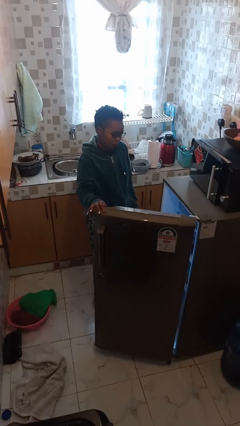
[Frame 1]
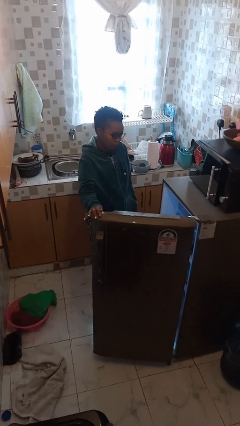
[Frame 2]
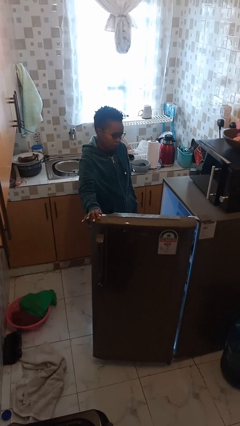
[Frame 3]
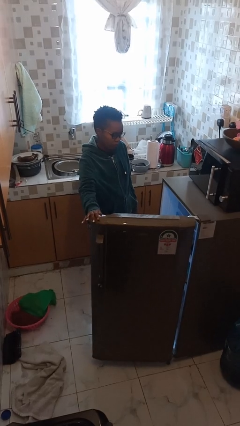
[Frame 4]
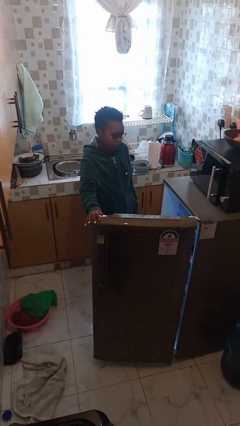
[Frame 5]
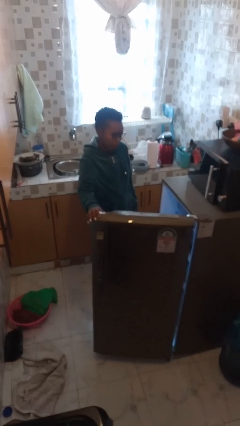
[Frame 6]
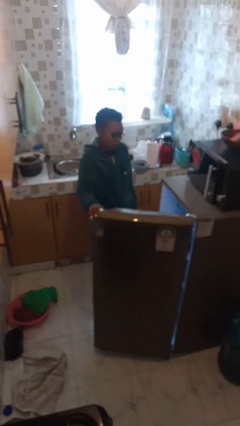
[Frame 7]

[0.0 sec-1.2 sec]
person opens refrigerator

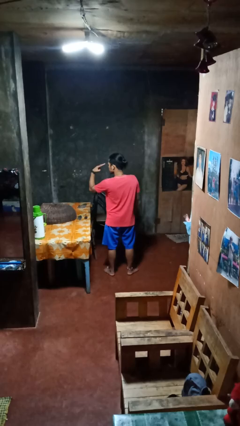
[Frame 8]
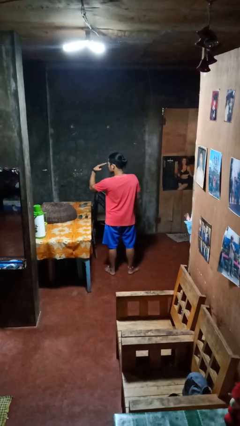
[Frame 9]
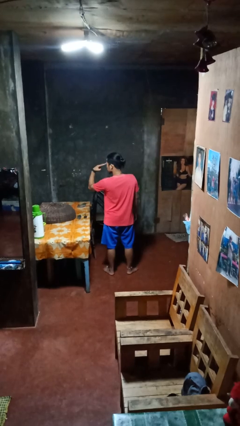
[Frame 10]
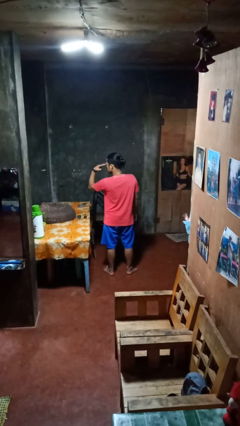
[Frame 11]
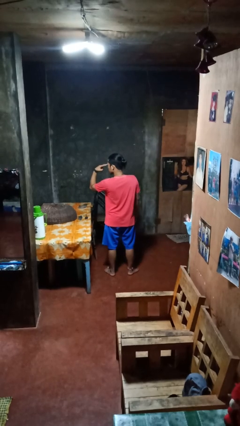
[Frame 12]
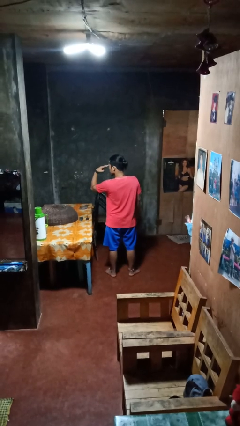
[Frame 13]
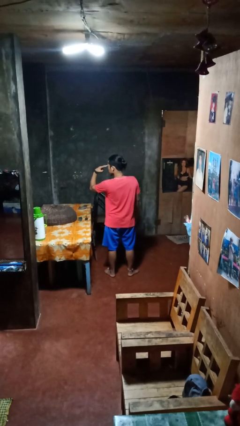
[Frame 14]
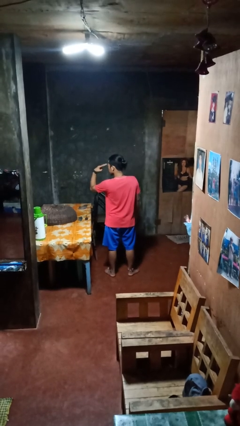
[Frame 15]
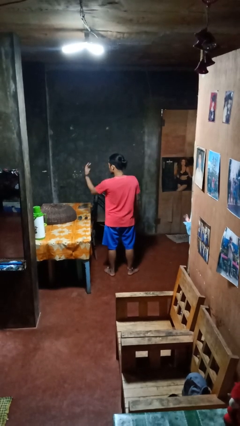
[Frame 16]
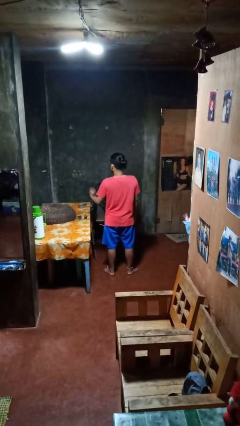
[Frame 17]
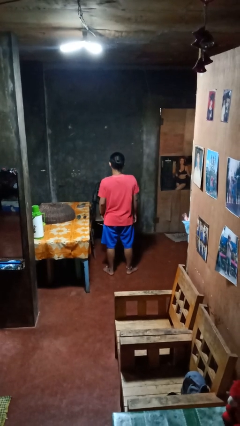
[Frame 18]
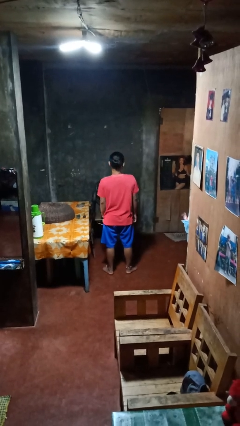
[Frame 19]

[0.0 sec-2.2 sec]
person gestures watch closely

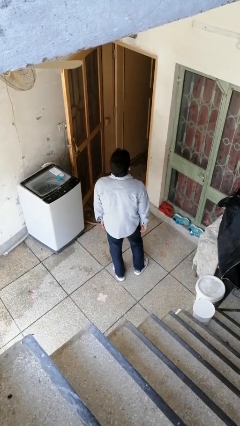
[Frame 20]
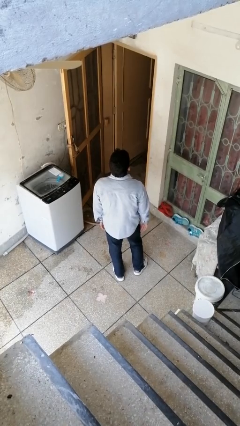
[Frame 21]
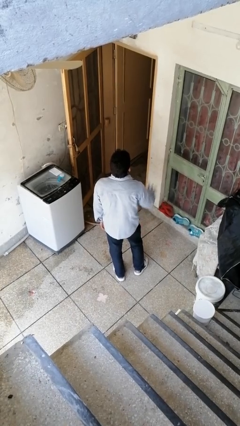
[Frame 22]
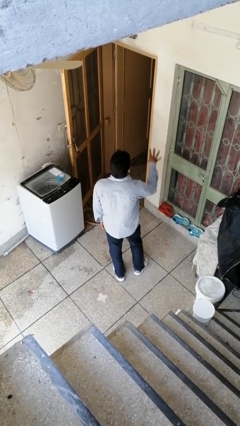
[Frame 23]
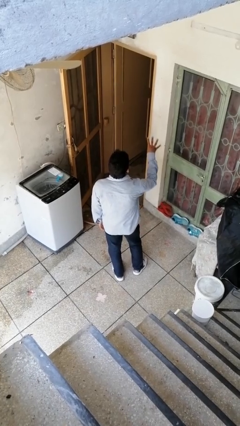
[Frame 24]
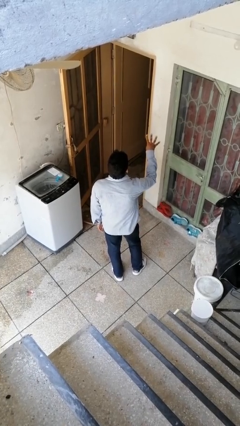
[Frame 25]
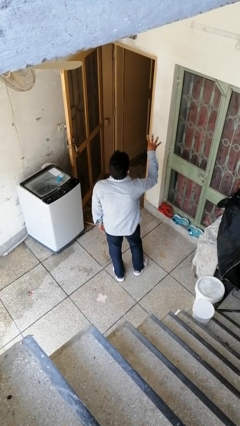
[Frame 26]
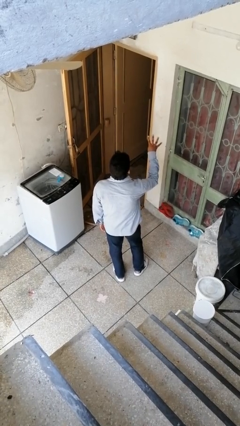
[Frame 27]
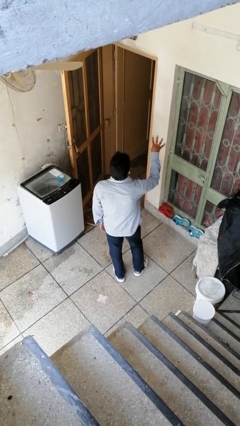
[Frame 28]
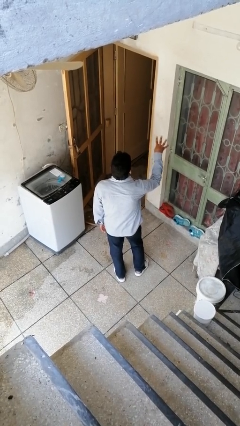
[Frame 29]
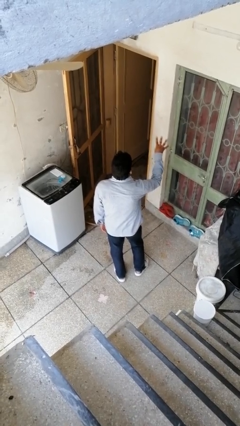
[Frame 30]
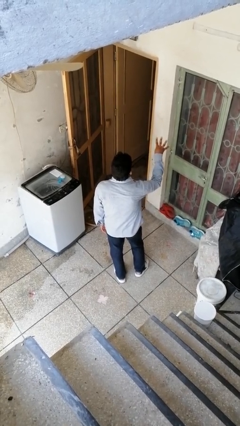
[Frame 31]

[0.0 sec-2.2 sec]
person gestures number four

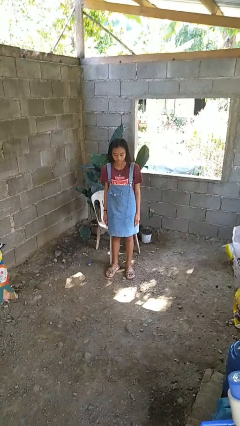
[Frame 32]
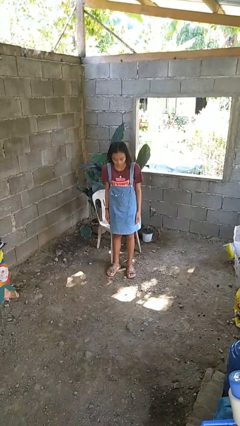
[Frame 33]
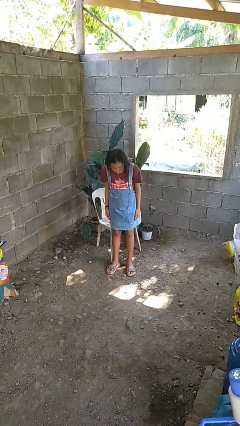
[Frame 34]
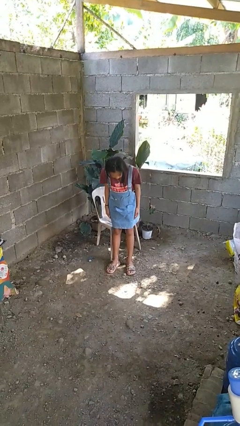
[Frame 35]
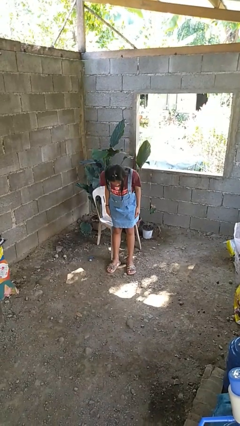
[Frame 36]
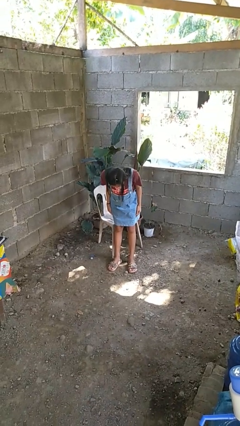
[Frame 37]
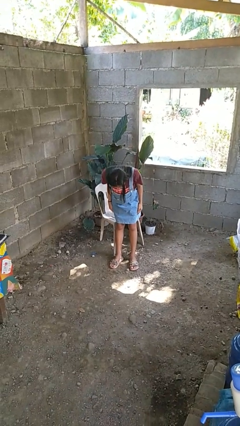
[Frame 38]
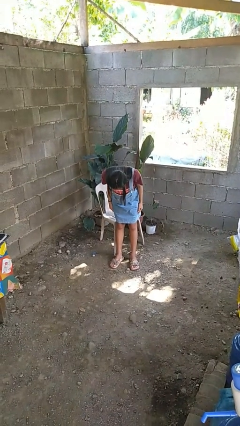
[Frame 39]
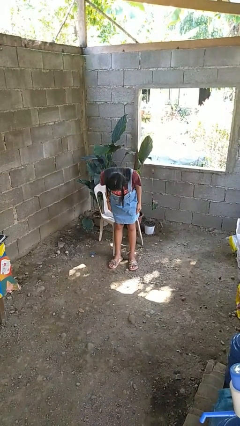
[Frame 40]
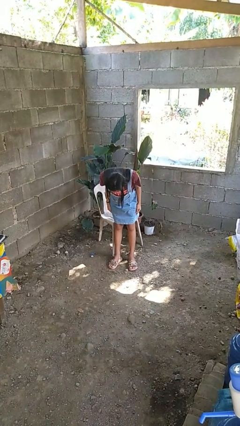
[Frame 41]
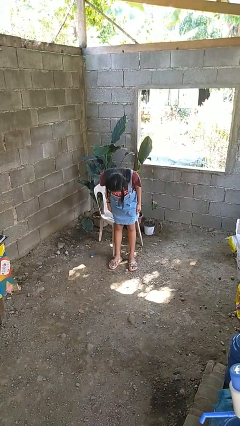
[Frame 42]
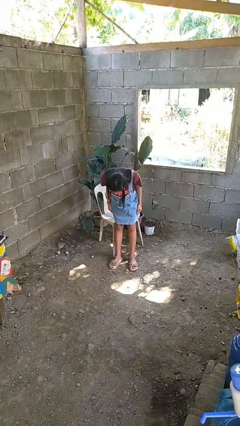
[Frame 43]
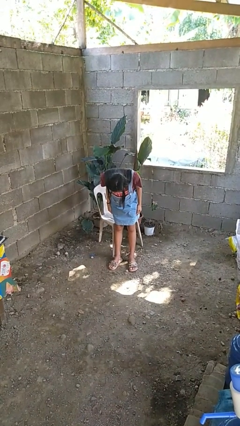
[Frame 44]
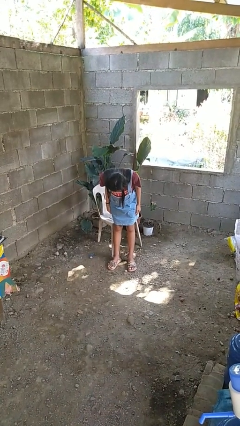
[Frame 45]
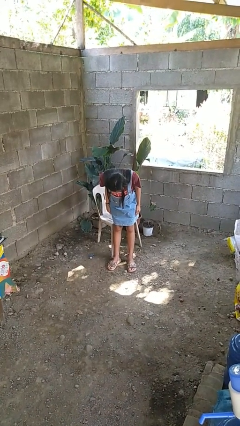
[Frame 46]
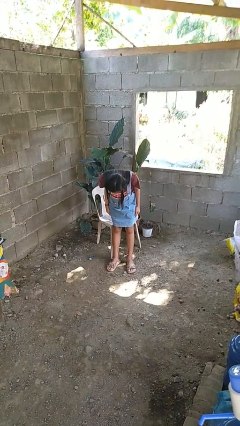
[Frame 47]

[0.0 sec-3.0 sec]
person bows

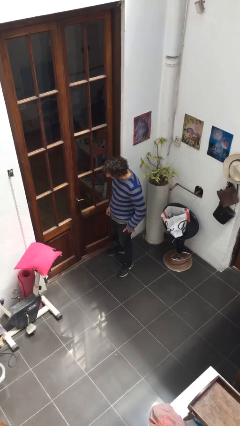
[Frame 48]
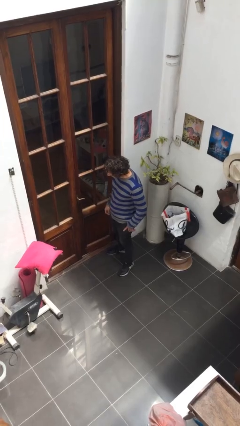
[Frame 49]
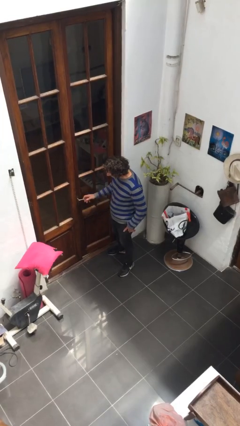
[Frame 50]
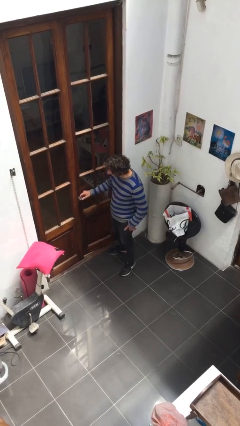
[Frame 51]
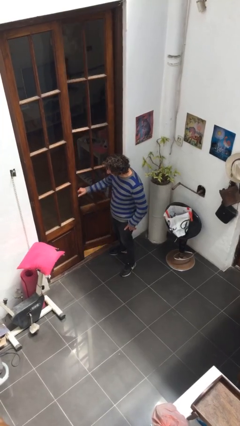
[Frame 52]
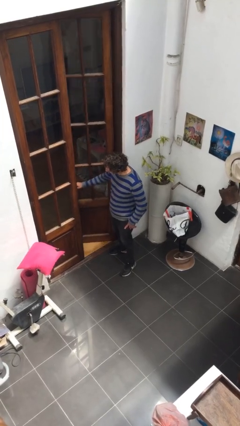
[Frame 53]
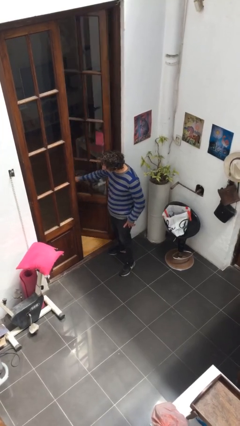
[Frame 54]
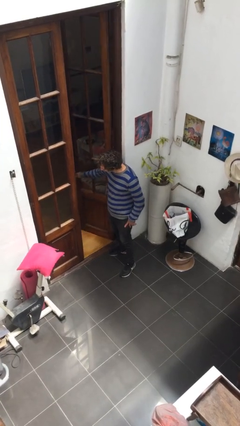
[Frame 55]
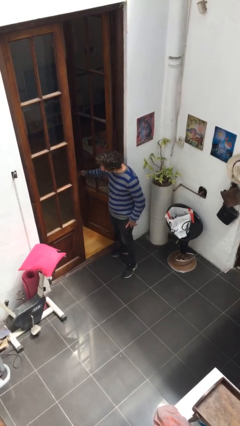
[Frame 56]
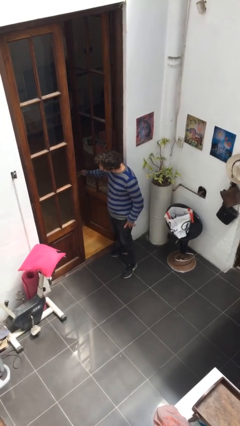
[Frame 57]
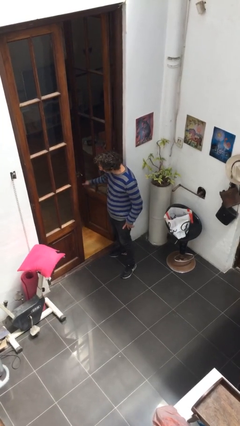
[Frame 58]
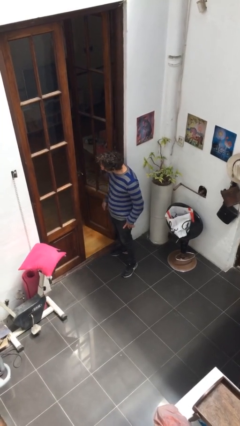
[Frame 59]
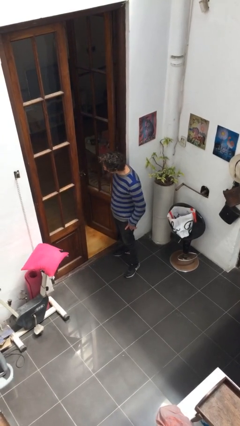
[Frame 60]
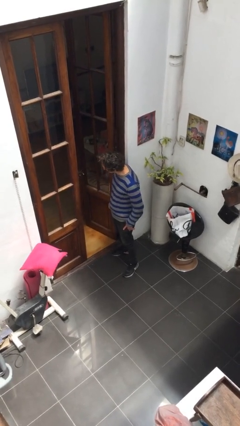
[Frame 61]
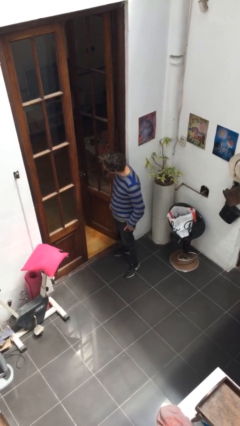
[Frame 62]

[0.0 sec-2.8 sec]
person opens facility door

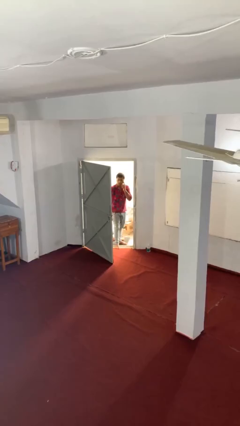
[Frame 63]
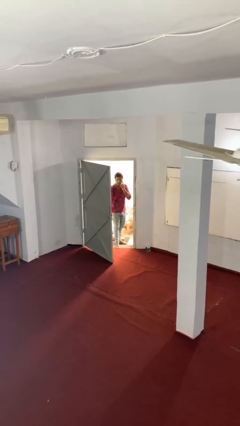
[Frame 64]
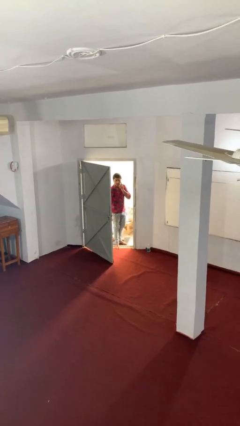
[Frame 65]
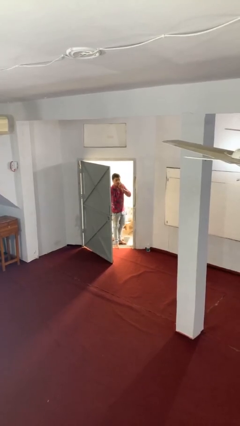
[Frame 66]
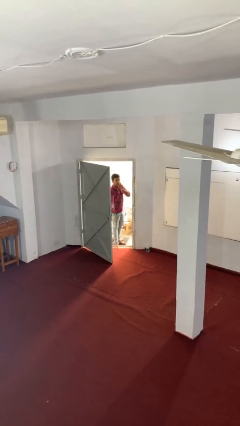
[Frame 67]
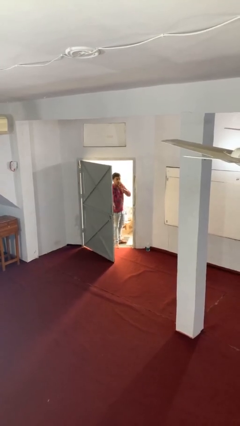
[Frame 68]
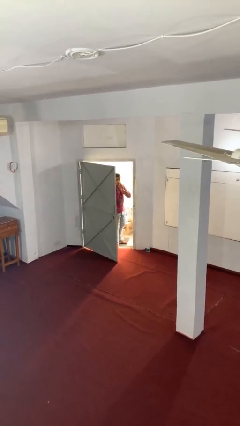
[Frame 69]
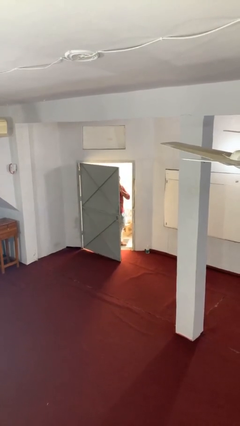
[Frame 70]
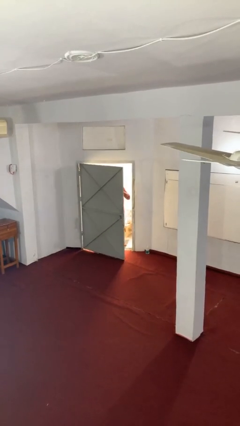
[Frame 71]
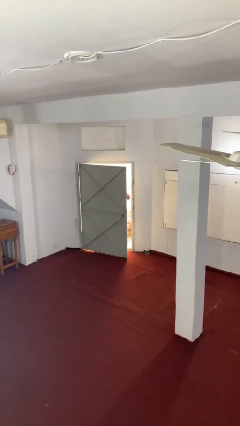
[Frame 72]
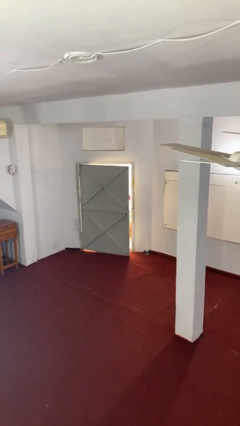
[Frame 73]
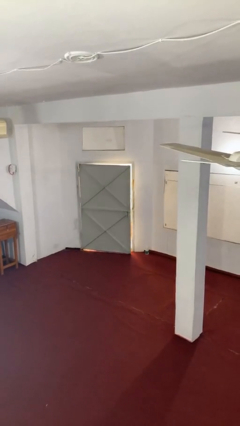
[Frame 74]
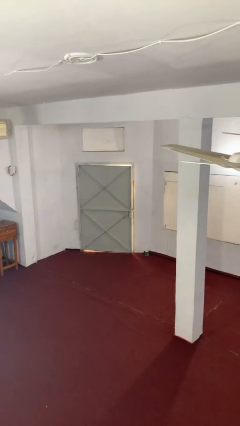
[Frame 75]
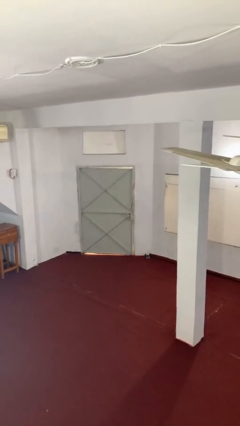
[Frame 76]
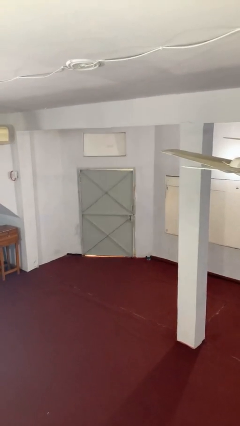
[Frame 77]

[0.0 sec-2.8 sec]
person closes facility door

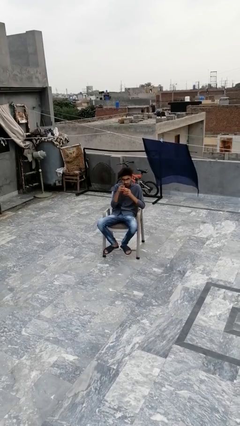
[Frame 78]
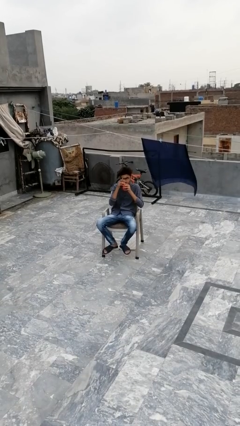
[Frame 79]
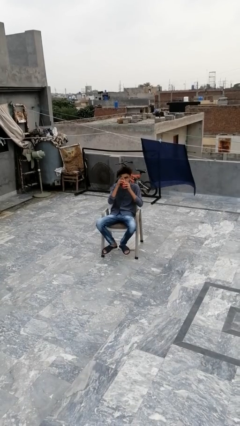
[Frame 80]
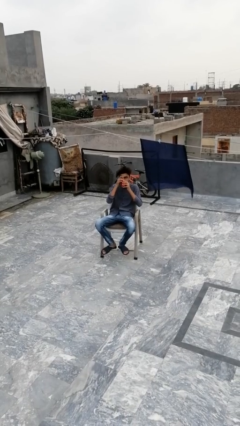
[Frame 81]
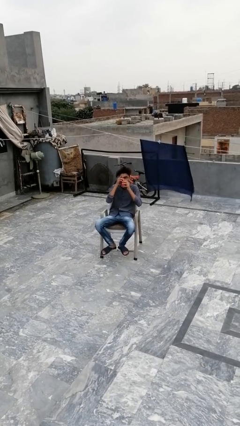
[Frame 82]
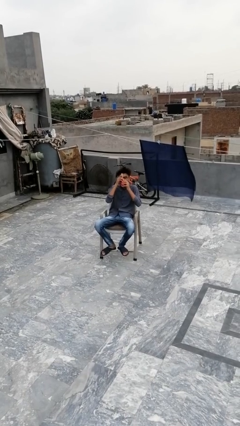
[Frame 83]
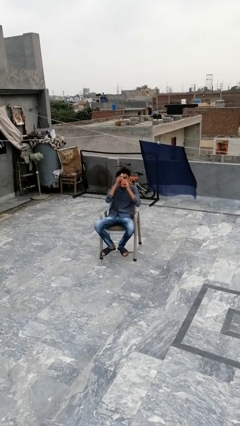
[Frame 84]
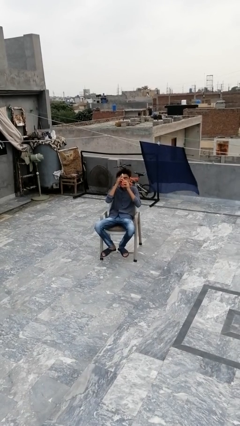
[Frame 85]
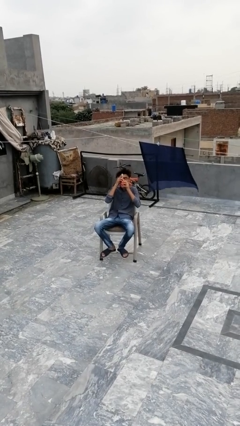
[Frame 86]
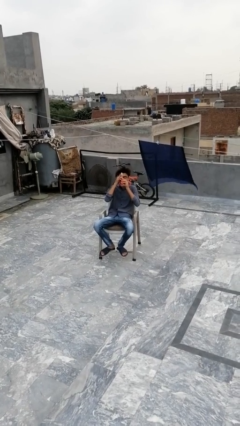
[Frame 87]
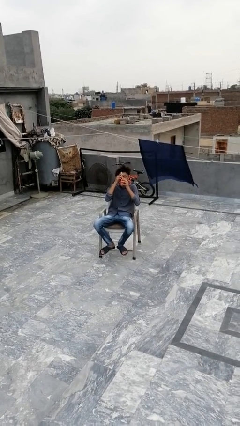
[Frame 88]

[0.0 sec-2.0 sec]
person drinks from mug

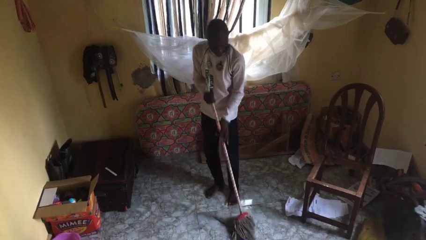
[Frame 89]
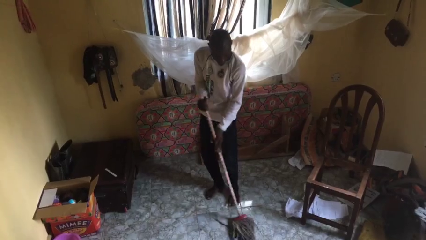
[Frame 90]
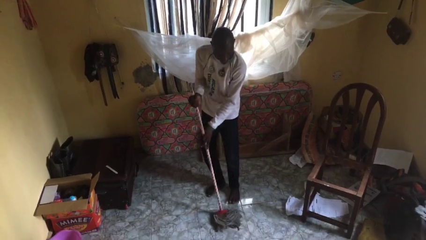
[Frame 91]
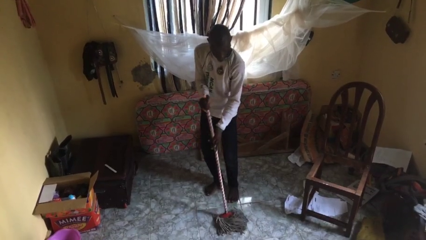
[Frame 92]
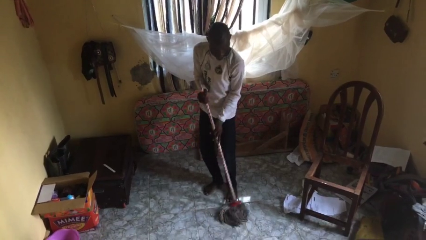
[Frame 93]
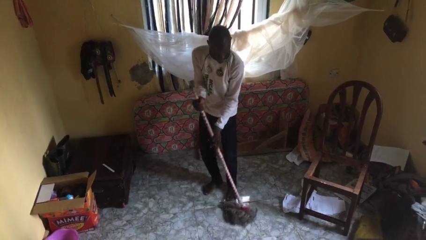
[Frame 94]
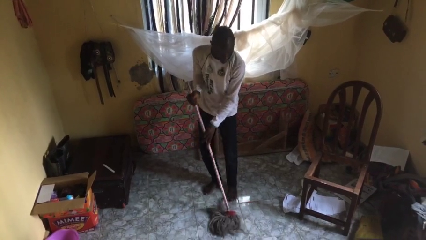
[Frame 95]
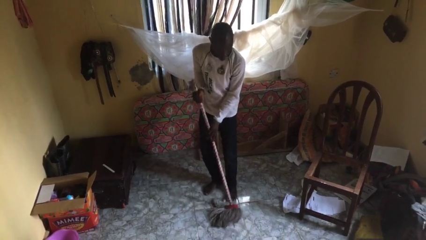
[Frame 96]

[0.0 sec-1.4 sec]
person mops
